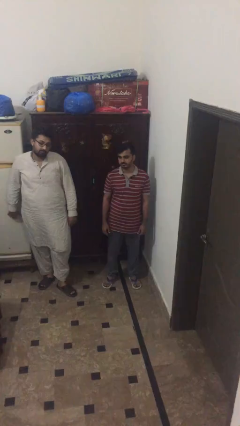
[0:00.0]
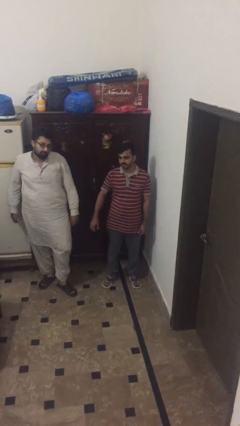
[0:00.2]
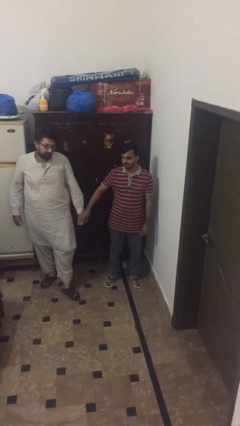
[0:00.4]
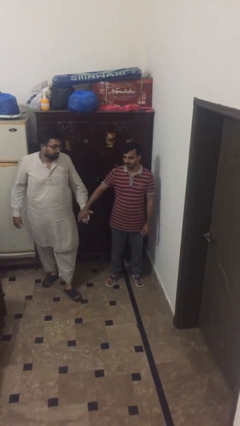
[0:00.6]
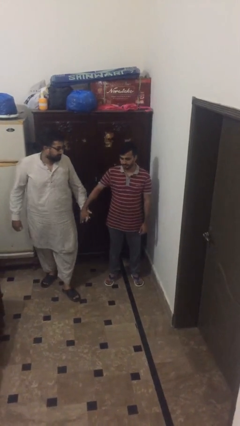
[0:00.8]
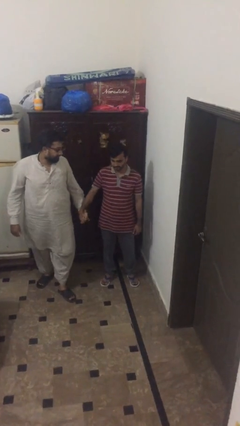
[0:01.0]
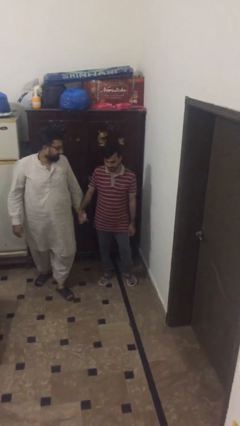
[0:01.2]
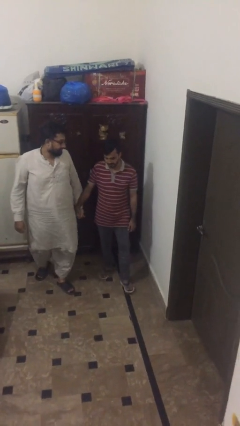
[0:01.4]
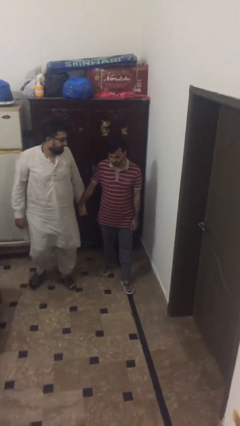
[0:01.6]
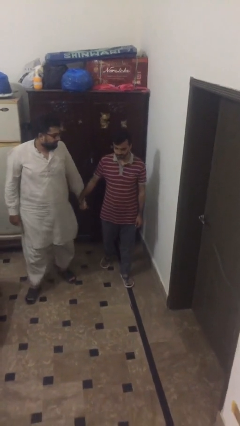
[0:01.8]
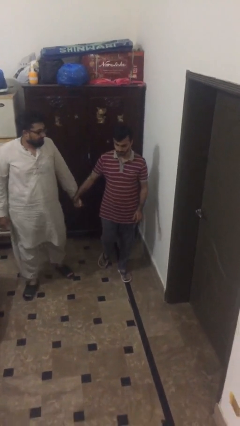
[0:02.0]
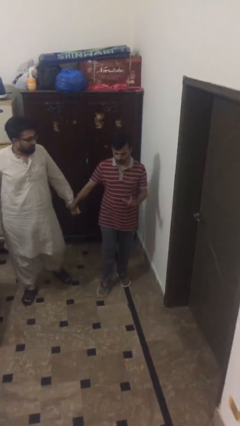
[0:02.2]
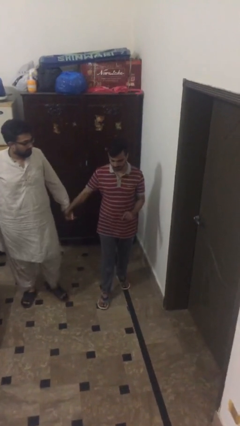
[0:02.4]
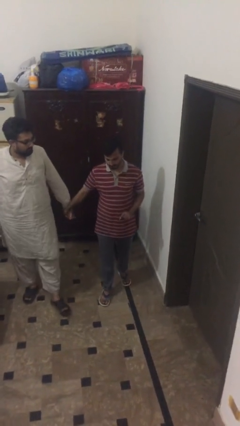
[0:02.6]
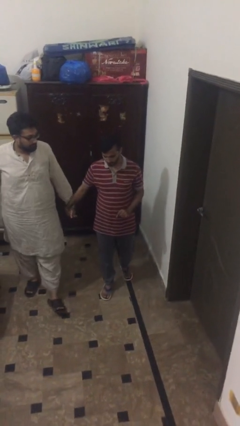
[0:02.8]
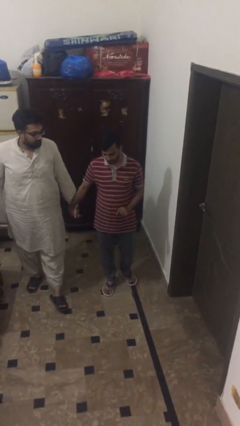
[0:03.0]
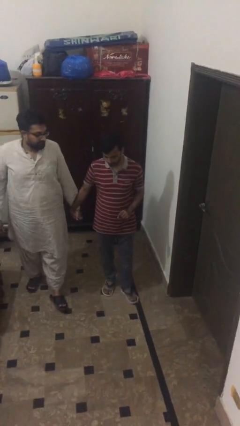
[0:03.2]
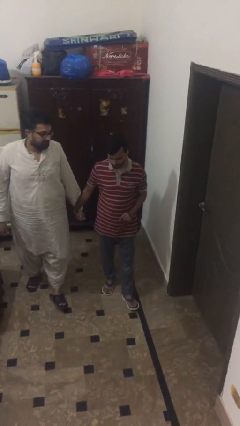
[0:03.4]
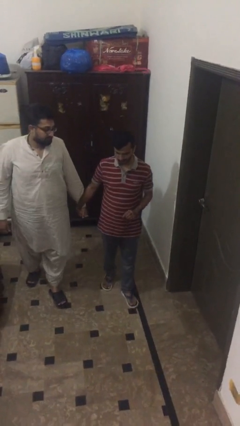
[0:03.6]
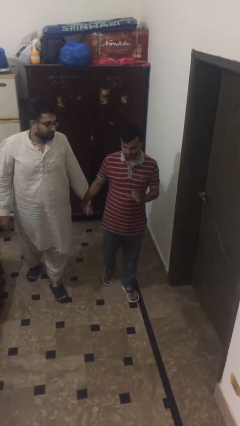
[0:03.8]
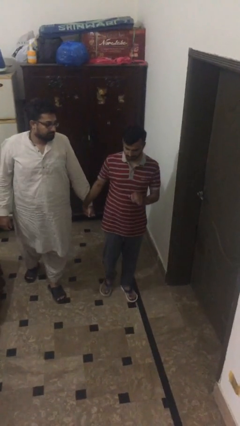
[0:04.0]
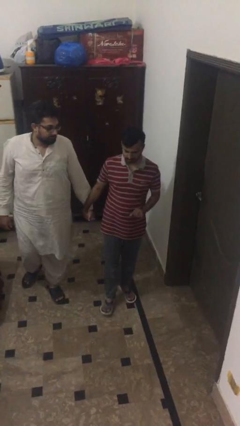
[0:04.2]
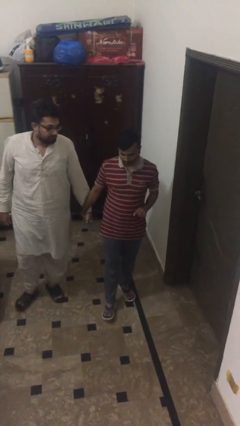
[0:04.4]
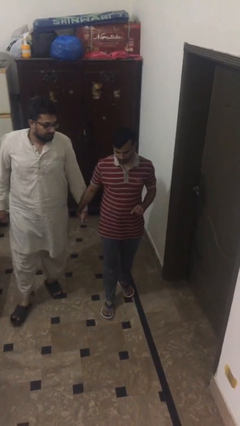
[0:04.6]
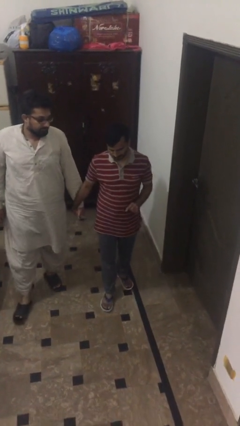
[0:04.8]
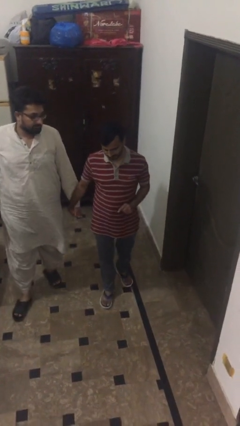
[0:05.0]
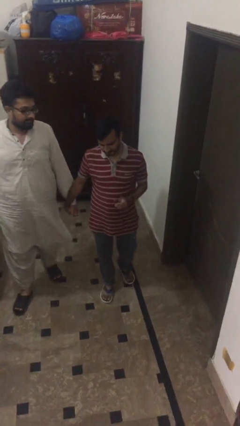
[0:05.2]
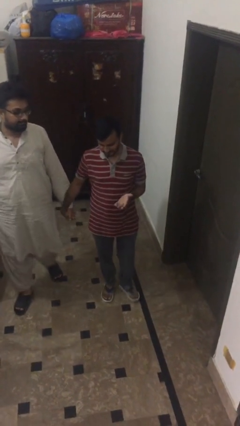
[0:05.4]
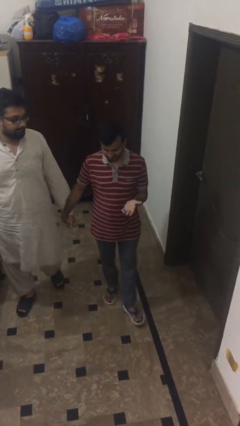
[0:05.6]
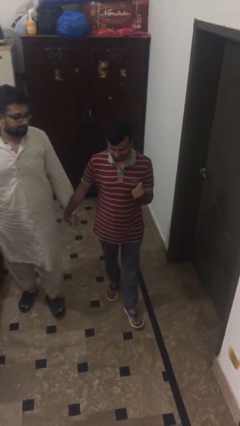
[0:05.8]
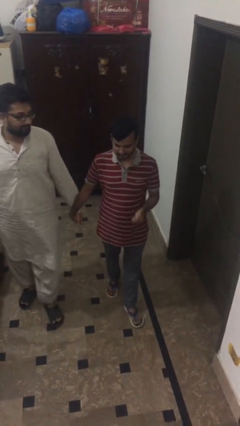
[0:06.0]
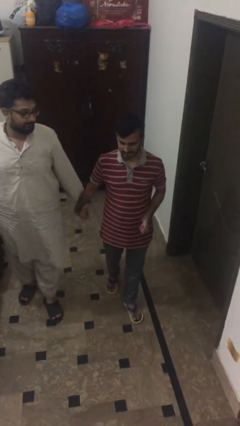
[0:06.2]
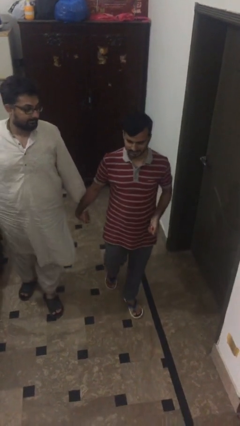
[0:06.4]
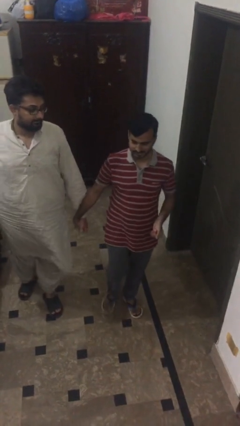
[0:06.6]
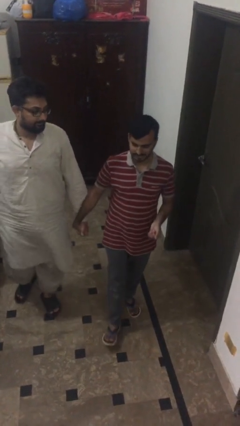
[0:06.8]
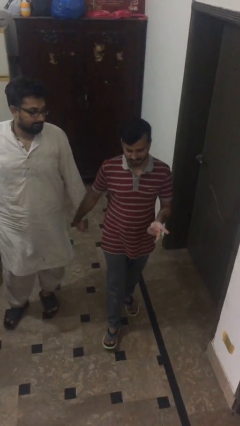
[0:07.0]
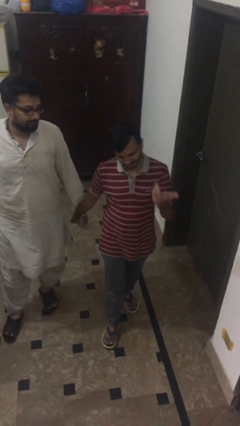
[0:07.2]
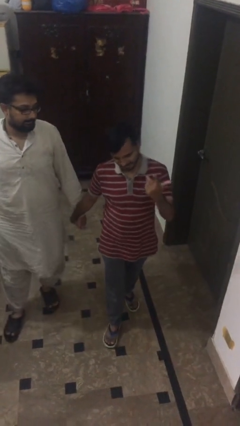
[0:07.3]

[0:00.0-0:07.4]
person holds hand

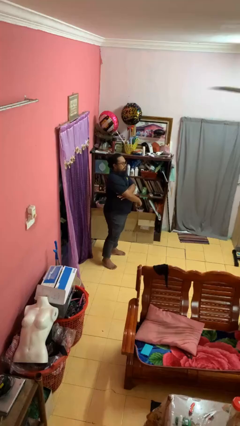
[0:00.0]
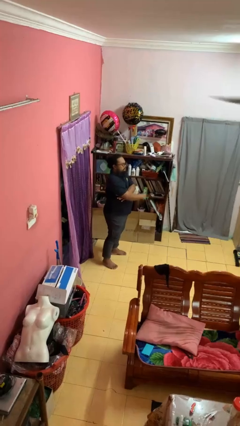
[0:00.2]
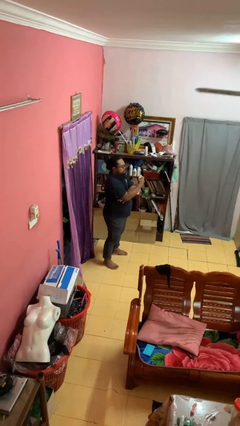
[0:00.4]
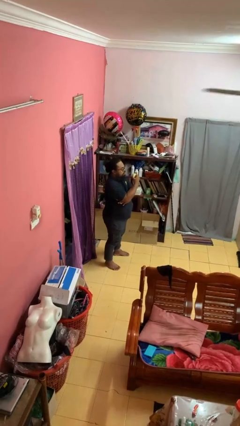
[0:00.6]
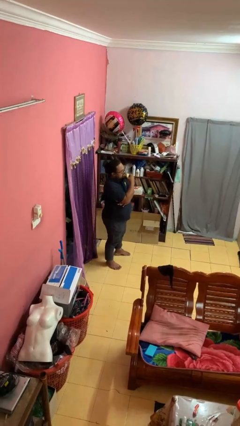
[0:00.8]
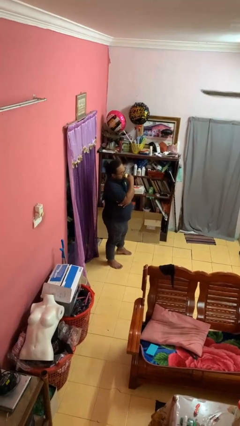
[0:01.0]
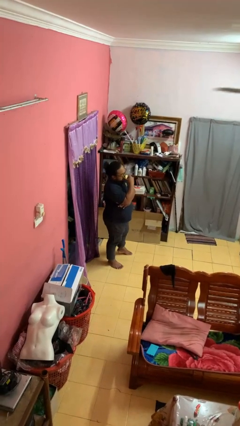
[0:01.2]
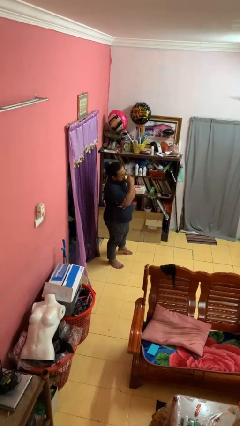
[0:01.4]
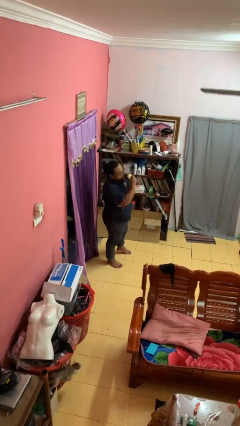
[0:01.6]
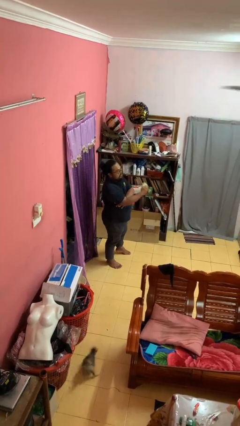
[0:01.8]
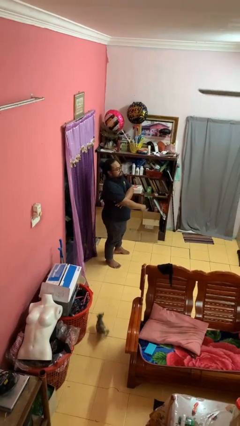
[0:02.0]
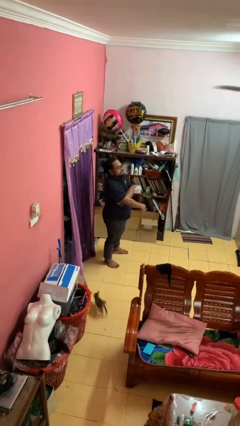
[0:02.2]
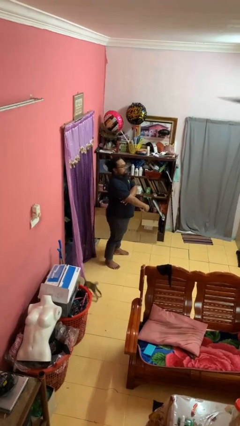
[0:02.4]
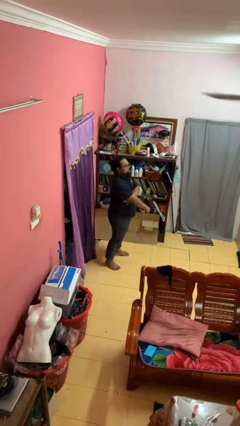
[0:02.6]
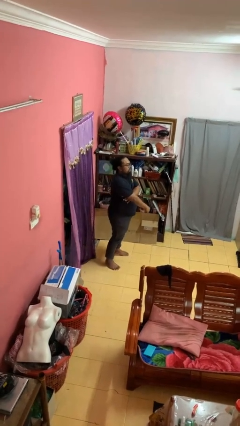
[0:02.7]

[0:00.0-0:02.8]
person eats apple

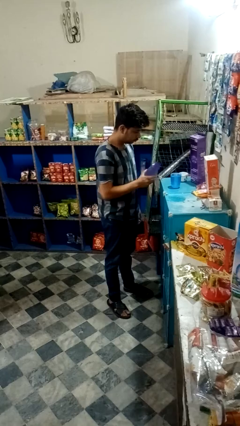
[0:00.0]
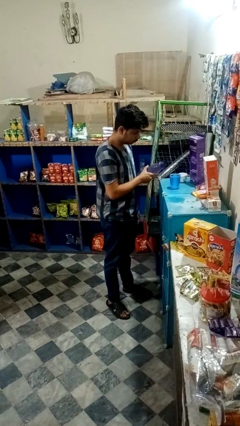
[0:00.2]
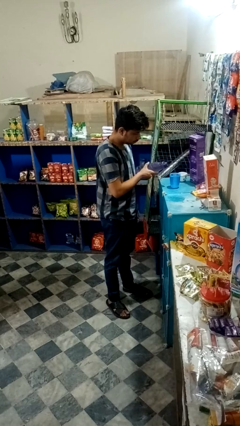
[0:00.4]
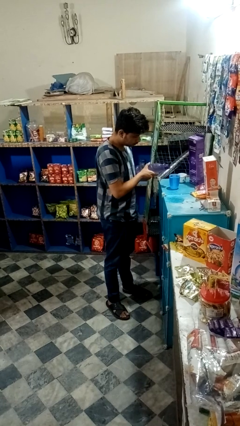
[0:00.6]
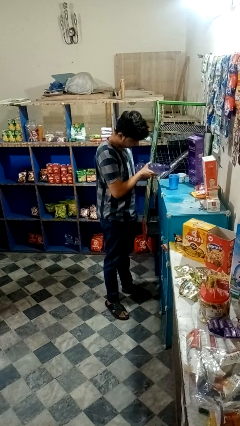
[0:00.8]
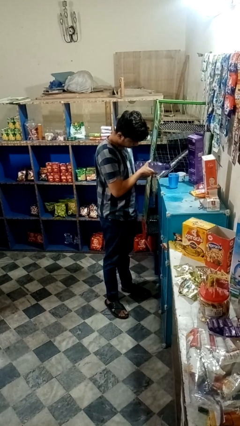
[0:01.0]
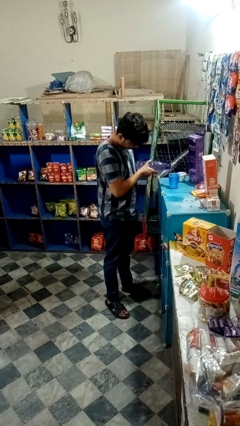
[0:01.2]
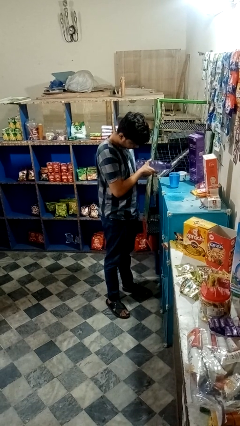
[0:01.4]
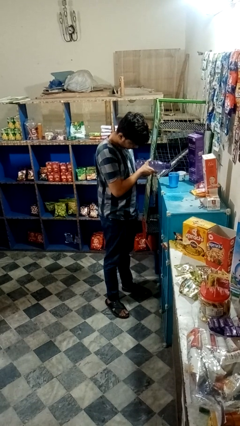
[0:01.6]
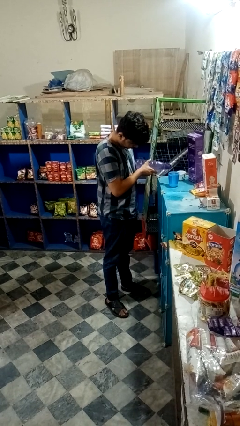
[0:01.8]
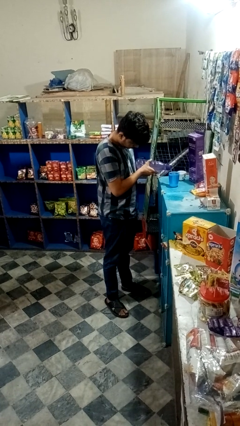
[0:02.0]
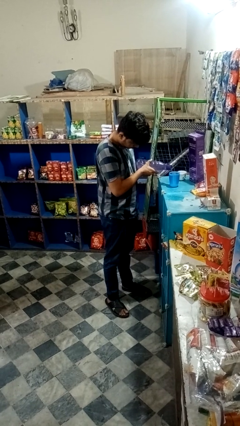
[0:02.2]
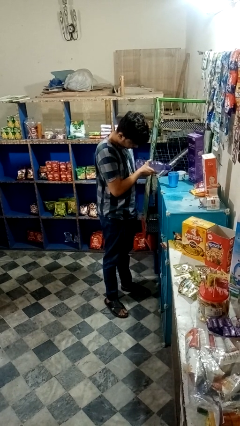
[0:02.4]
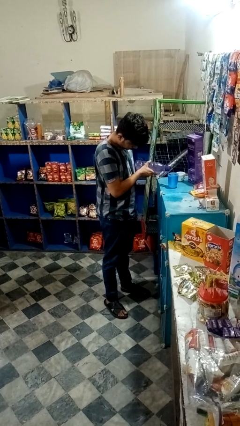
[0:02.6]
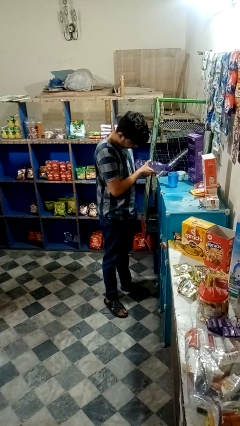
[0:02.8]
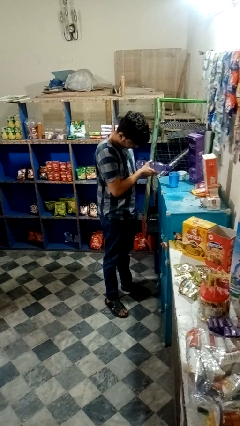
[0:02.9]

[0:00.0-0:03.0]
person pours liquid into cup

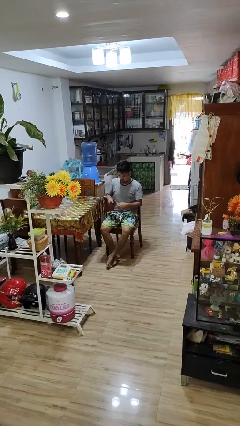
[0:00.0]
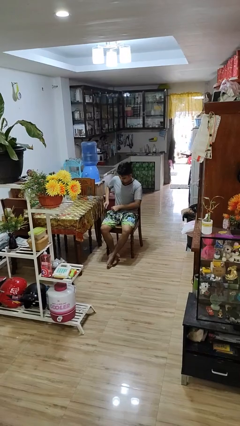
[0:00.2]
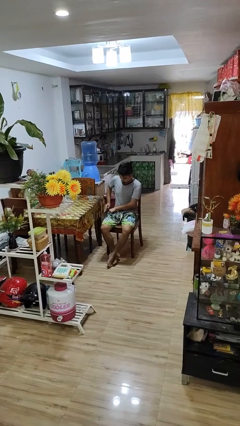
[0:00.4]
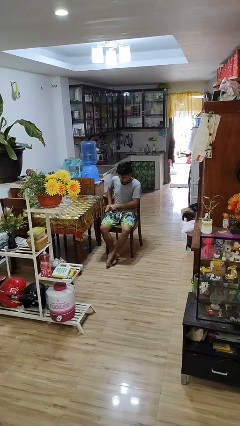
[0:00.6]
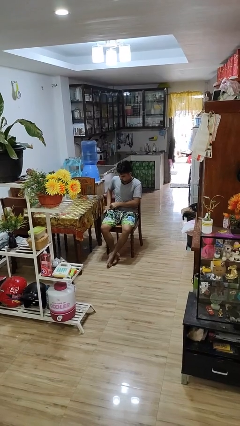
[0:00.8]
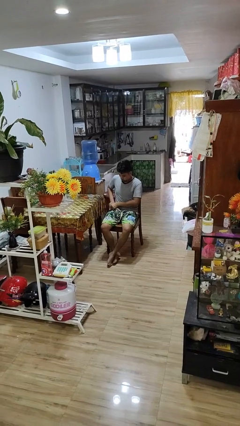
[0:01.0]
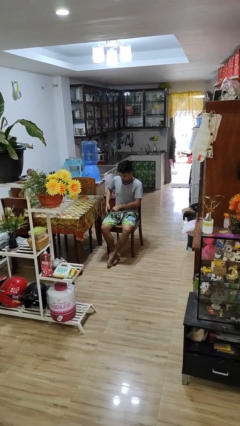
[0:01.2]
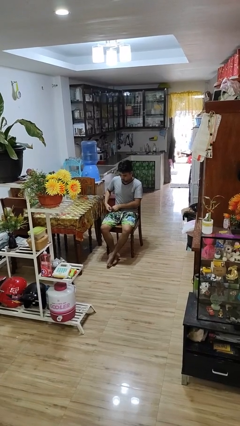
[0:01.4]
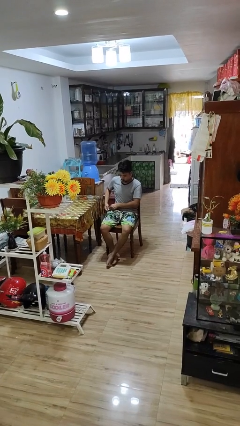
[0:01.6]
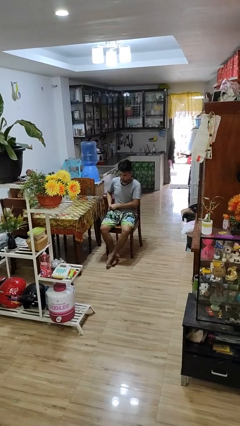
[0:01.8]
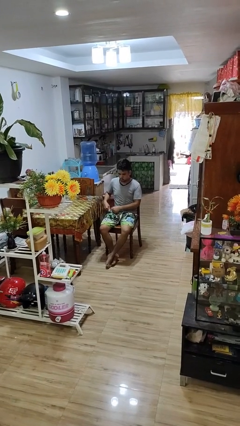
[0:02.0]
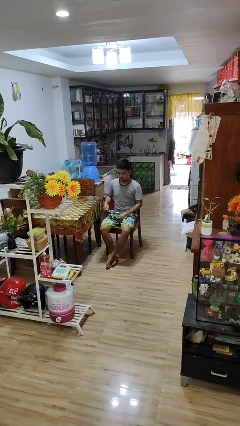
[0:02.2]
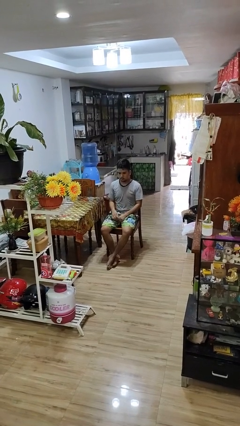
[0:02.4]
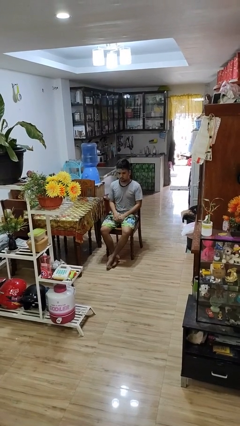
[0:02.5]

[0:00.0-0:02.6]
person puts phone into pocket

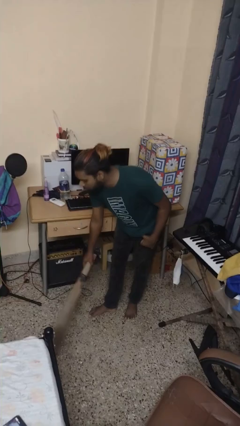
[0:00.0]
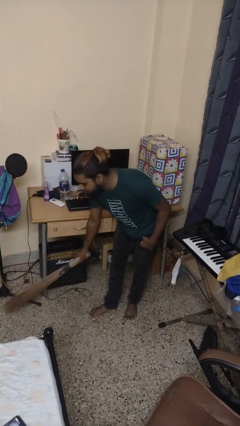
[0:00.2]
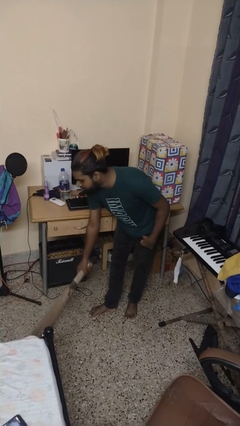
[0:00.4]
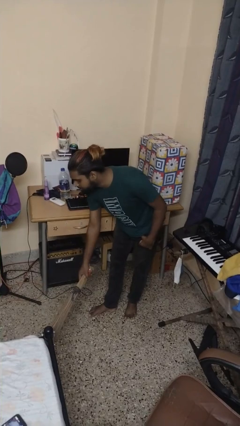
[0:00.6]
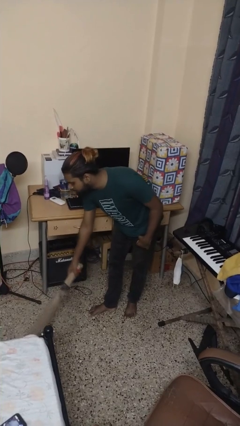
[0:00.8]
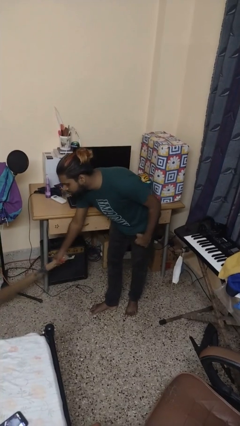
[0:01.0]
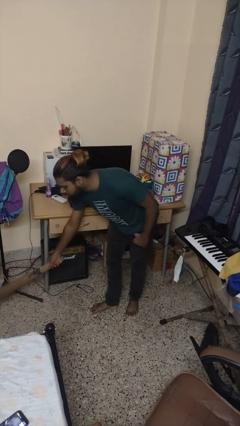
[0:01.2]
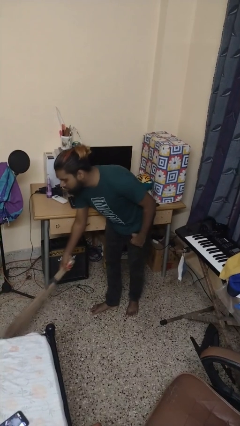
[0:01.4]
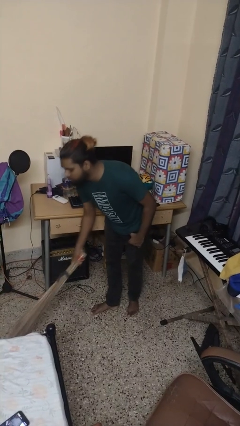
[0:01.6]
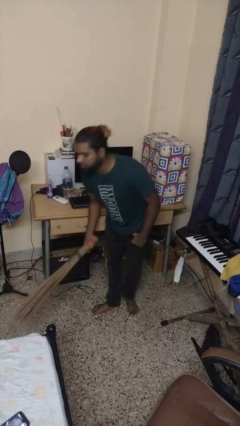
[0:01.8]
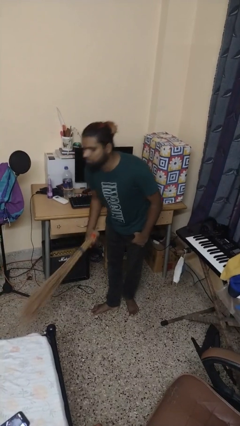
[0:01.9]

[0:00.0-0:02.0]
person sweeps floor
